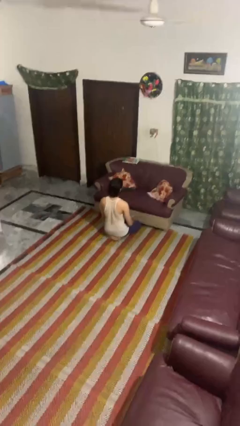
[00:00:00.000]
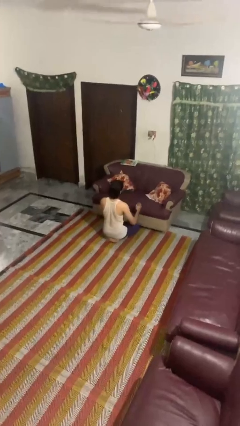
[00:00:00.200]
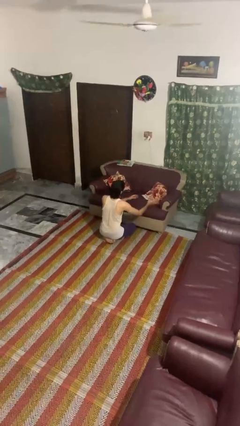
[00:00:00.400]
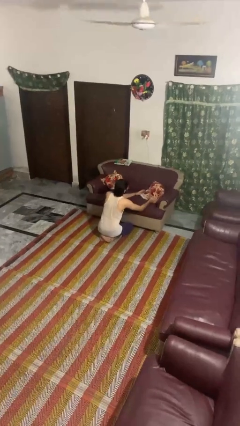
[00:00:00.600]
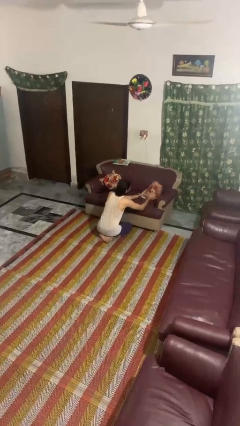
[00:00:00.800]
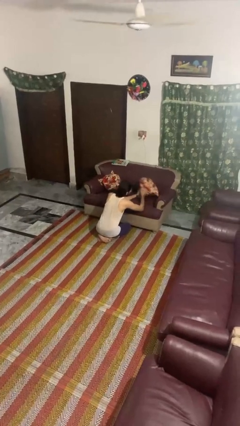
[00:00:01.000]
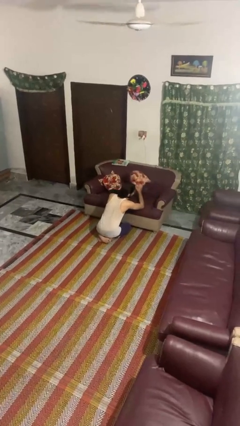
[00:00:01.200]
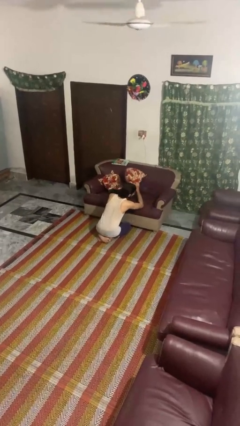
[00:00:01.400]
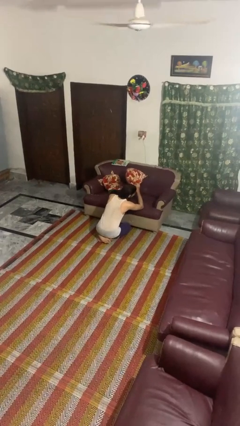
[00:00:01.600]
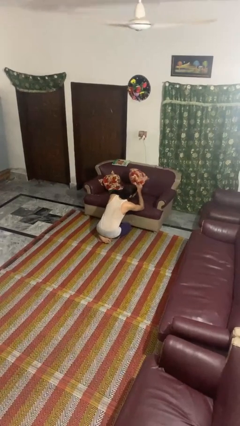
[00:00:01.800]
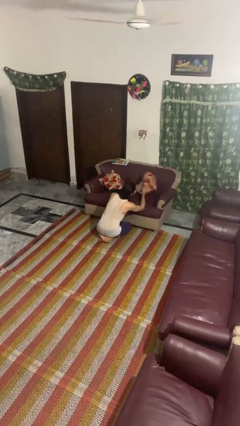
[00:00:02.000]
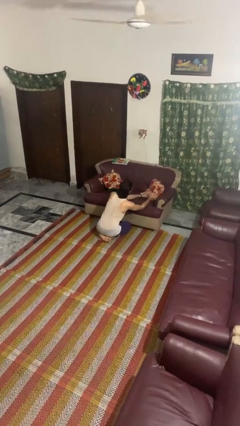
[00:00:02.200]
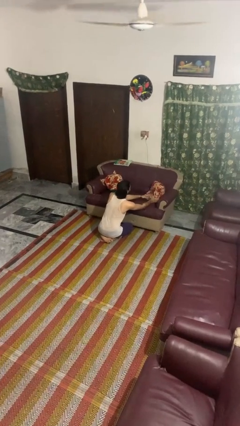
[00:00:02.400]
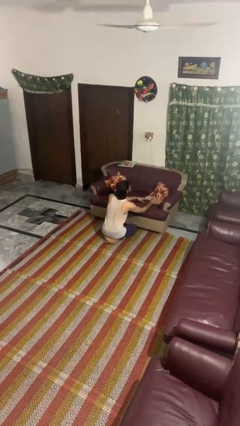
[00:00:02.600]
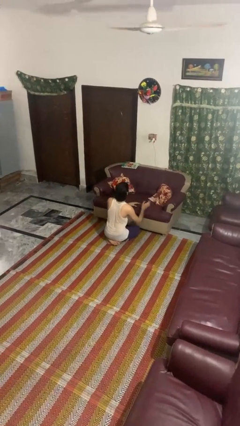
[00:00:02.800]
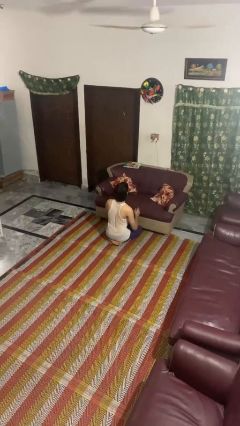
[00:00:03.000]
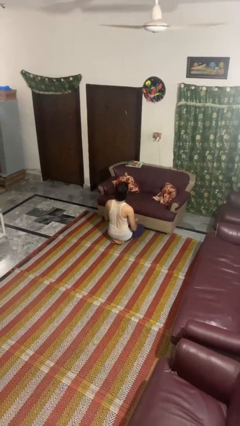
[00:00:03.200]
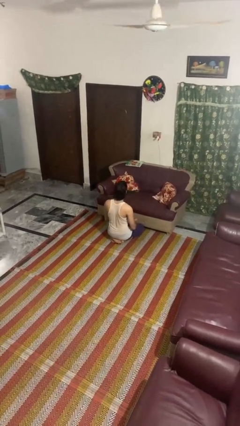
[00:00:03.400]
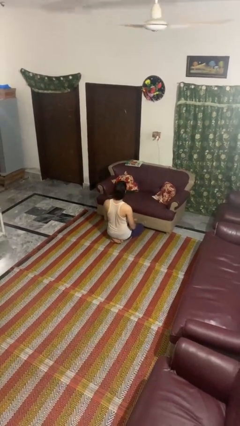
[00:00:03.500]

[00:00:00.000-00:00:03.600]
person searches in couch

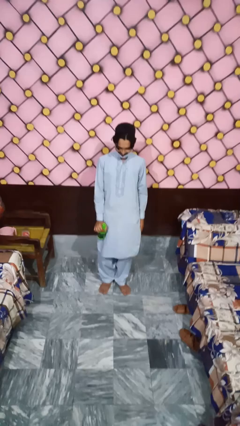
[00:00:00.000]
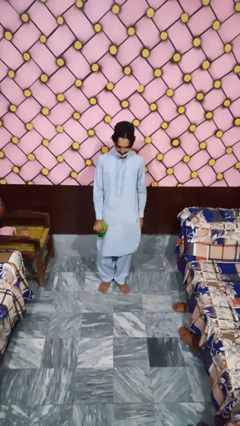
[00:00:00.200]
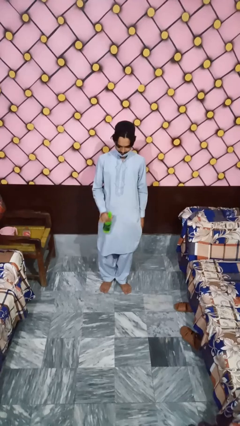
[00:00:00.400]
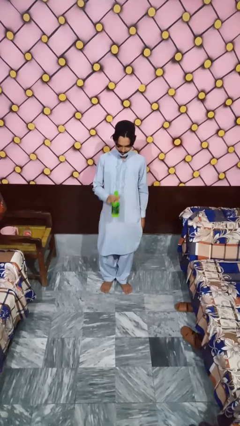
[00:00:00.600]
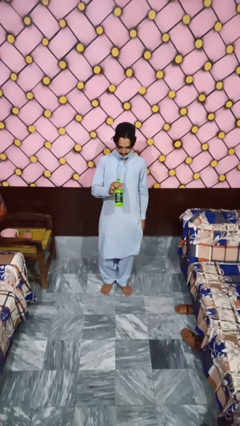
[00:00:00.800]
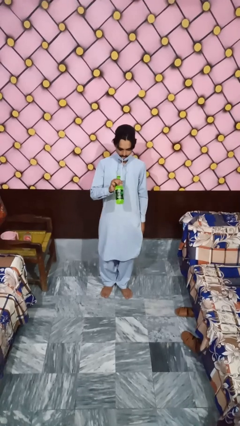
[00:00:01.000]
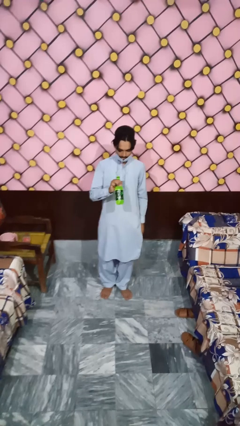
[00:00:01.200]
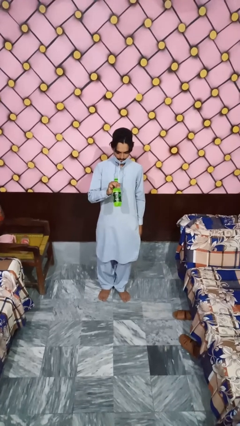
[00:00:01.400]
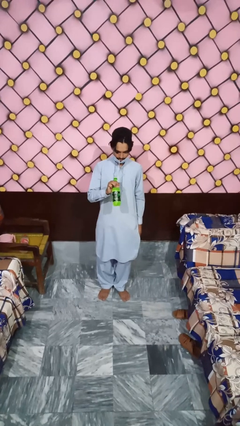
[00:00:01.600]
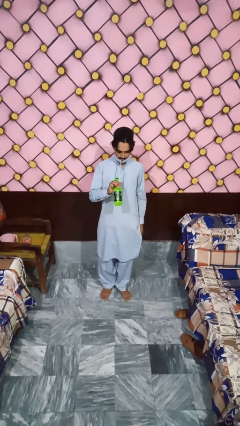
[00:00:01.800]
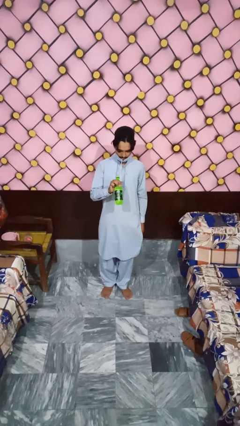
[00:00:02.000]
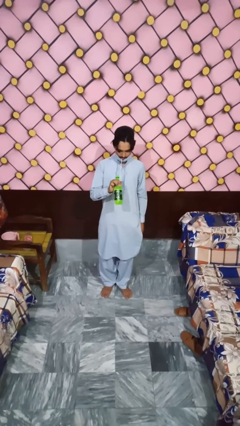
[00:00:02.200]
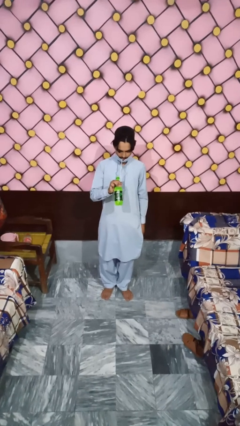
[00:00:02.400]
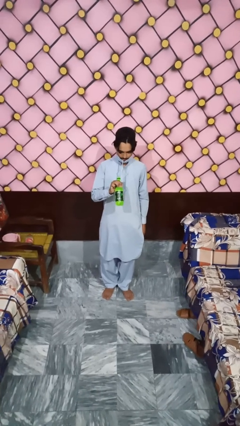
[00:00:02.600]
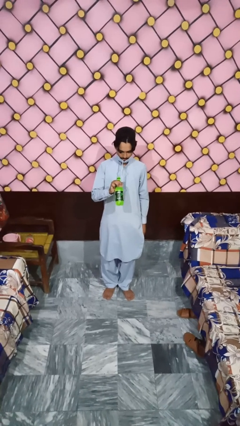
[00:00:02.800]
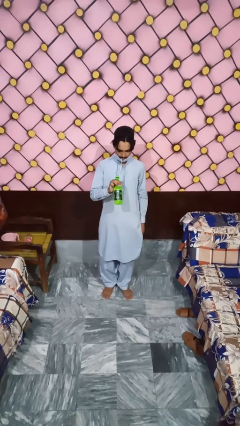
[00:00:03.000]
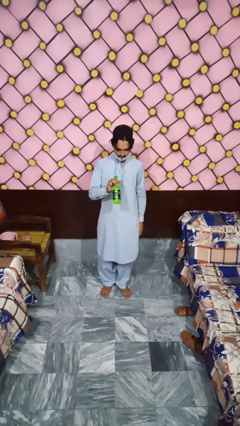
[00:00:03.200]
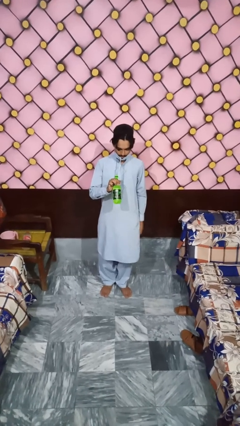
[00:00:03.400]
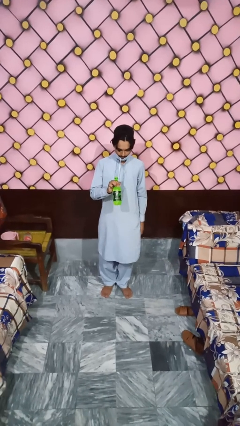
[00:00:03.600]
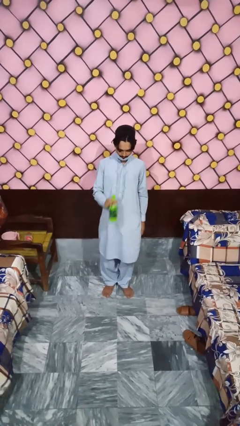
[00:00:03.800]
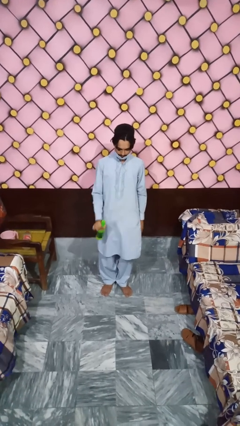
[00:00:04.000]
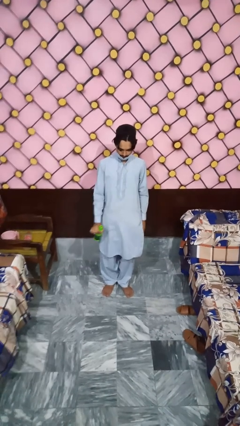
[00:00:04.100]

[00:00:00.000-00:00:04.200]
person drinks from straw

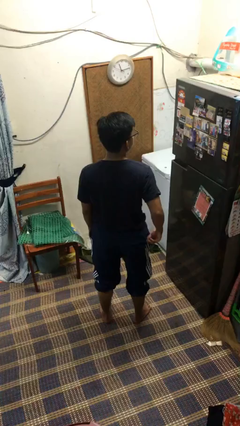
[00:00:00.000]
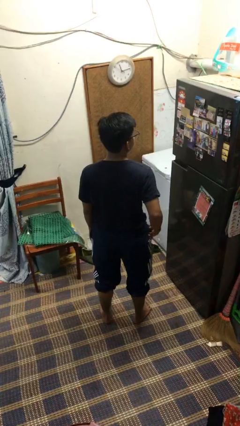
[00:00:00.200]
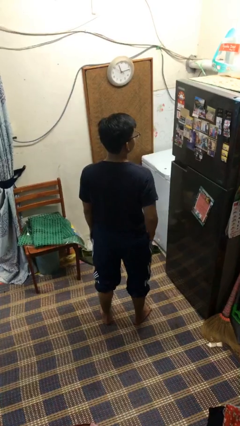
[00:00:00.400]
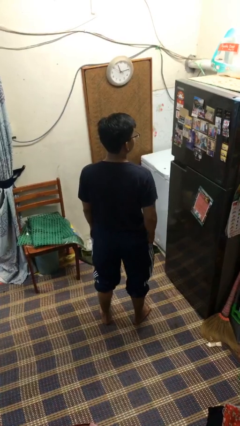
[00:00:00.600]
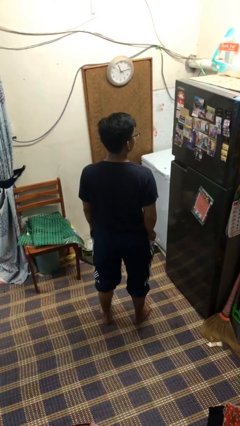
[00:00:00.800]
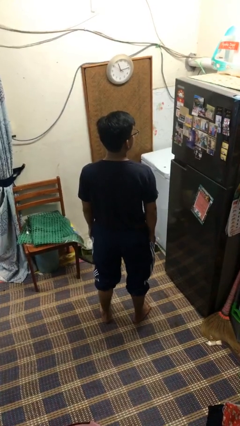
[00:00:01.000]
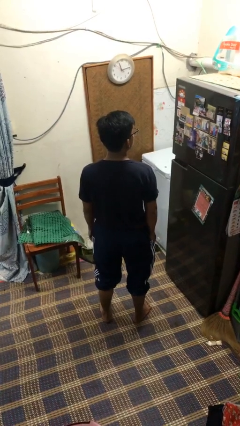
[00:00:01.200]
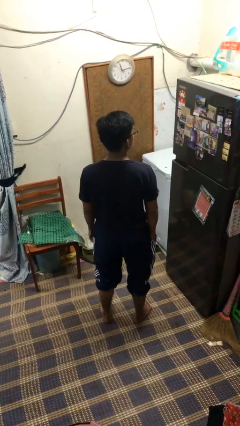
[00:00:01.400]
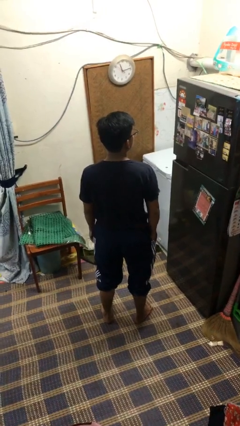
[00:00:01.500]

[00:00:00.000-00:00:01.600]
person puts hands in back pockets

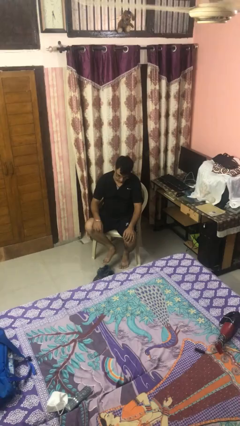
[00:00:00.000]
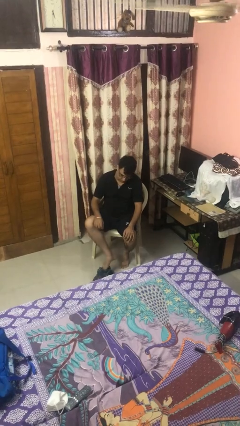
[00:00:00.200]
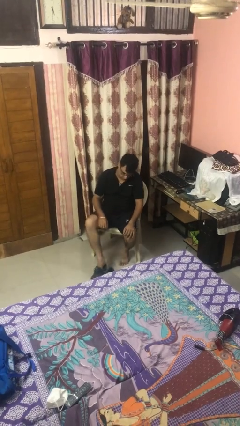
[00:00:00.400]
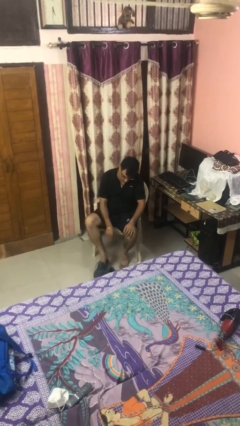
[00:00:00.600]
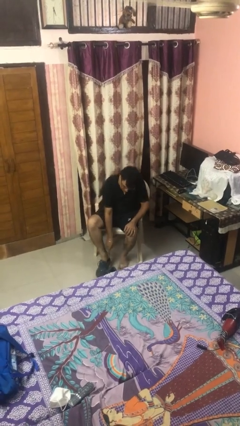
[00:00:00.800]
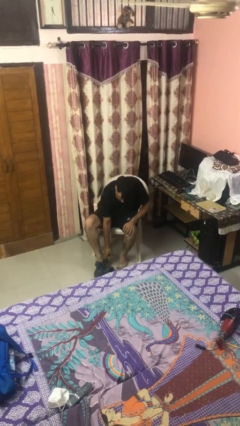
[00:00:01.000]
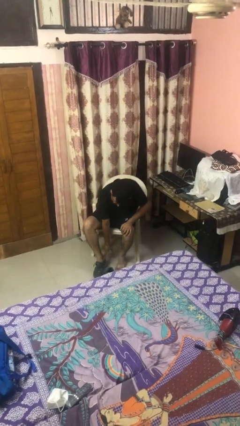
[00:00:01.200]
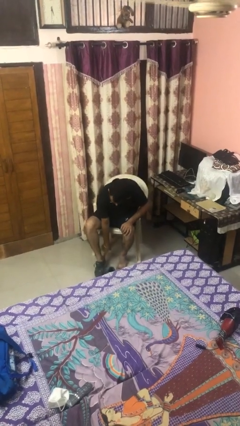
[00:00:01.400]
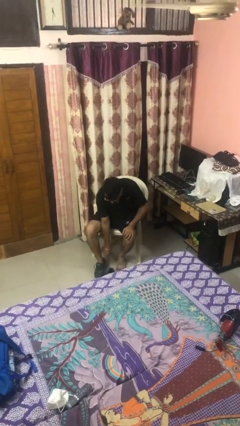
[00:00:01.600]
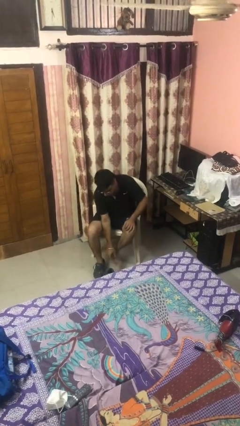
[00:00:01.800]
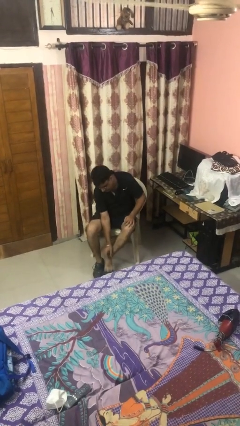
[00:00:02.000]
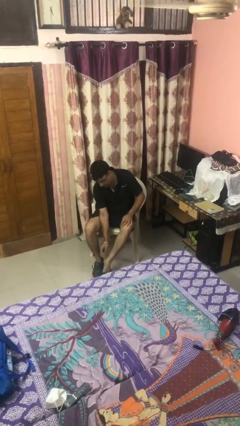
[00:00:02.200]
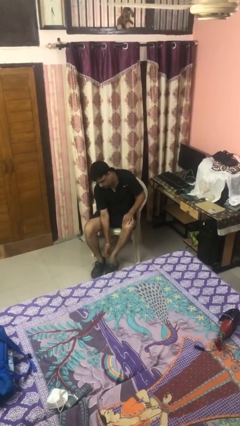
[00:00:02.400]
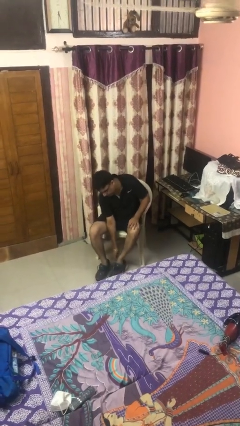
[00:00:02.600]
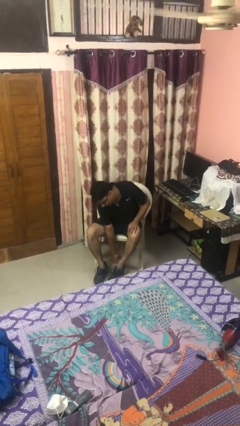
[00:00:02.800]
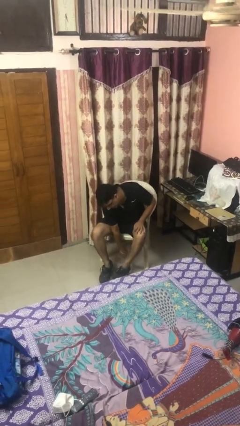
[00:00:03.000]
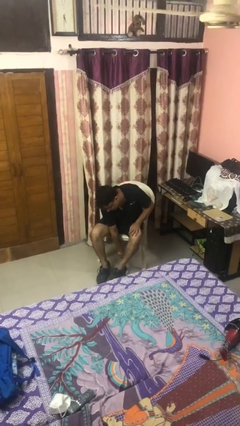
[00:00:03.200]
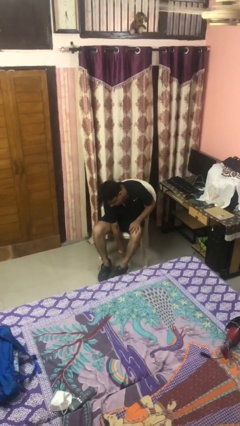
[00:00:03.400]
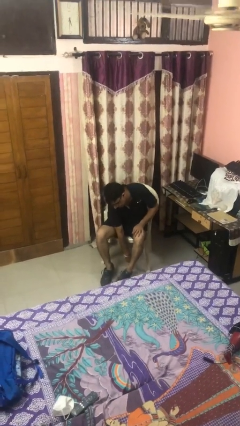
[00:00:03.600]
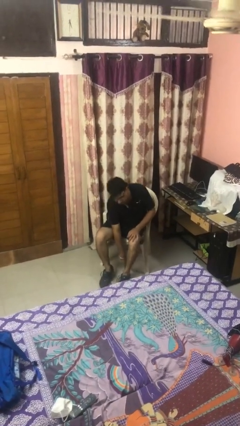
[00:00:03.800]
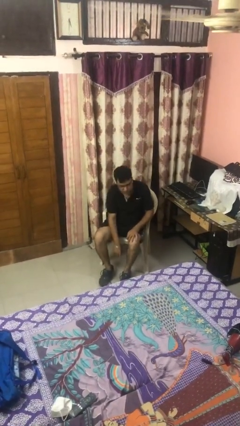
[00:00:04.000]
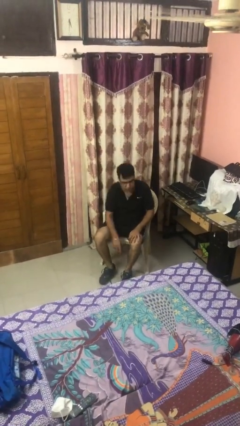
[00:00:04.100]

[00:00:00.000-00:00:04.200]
person puts on shoes

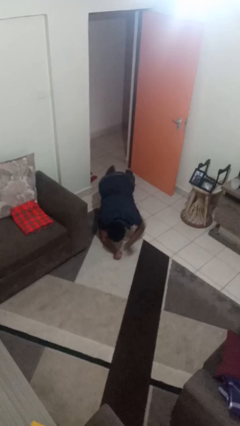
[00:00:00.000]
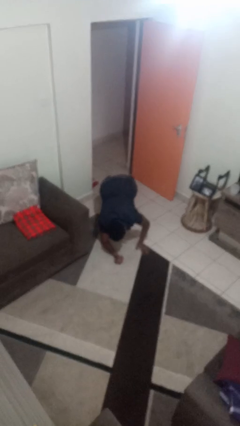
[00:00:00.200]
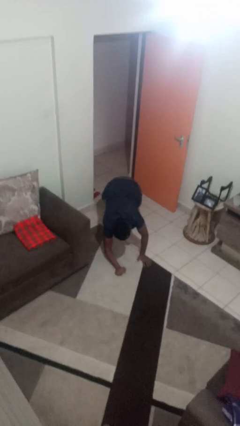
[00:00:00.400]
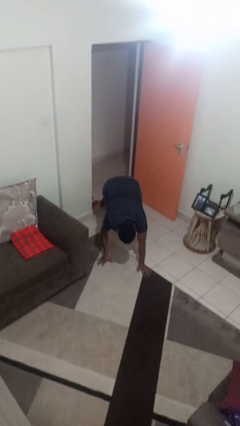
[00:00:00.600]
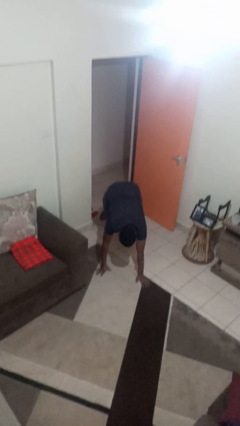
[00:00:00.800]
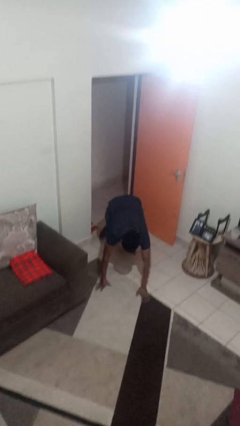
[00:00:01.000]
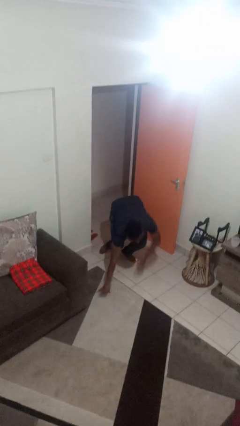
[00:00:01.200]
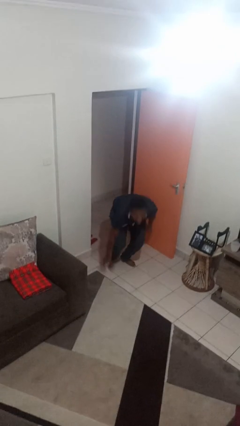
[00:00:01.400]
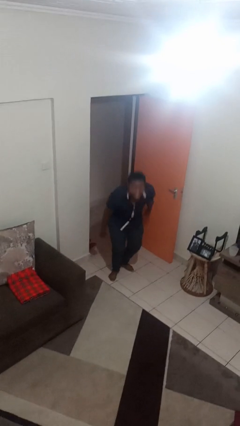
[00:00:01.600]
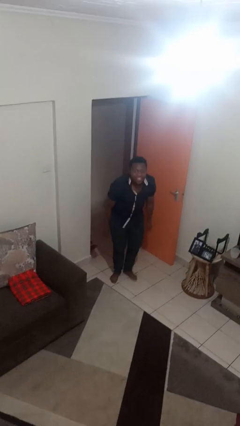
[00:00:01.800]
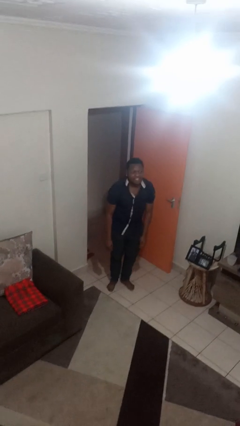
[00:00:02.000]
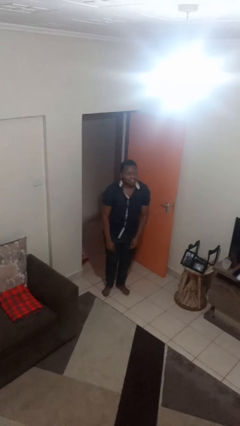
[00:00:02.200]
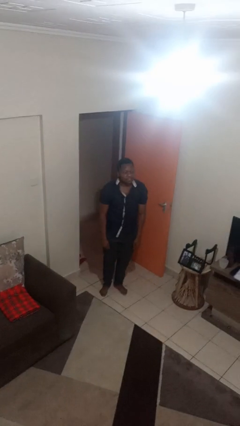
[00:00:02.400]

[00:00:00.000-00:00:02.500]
person stands up from floor

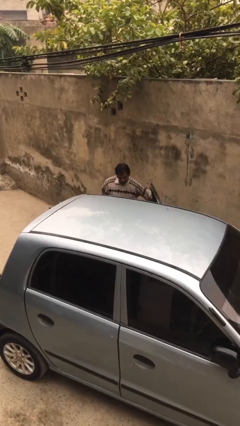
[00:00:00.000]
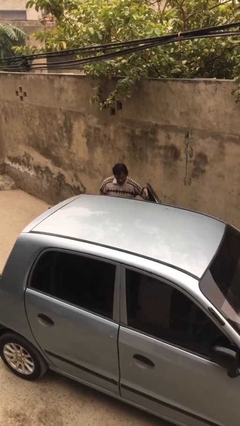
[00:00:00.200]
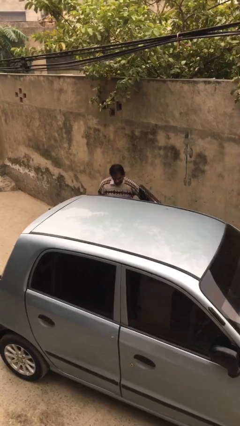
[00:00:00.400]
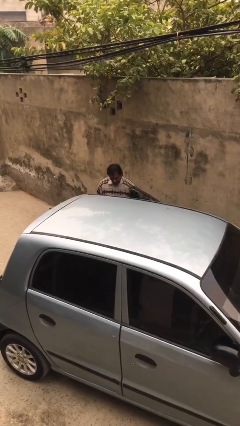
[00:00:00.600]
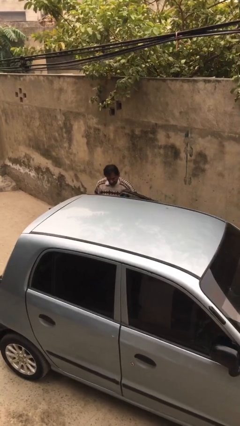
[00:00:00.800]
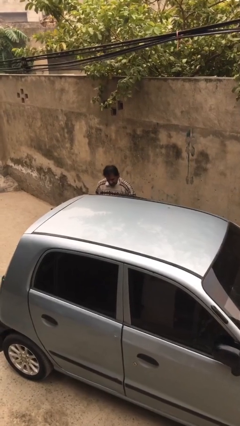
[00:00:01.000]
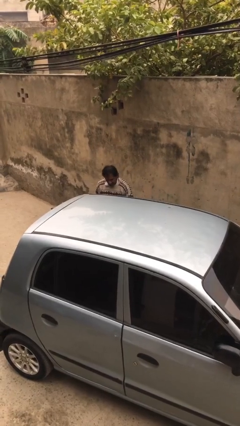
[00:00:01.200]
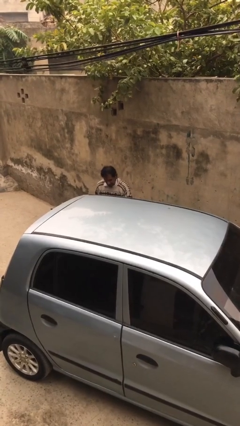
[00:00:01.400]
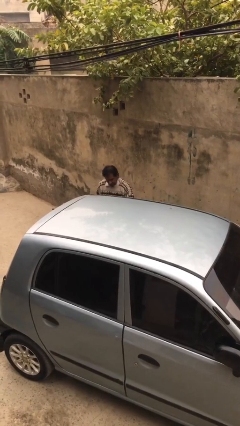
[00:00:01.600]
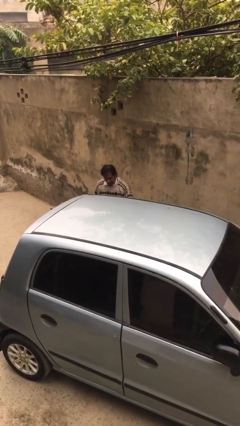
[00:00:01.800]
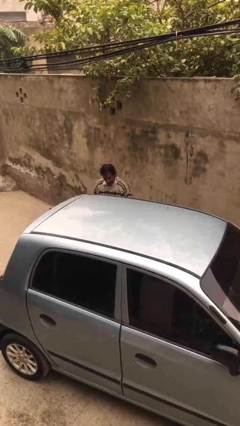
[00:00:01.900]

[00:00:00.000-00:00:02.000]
person closes car door
